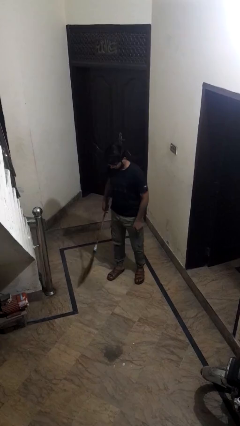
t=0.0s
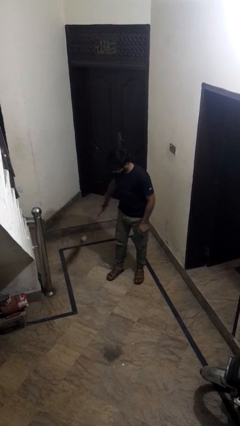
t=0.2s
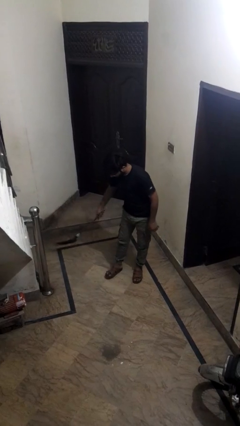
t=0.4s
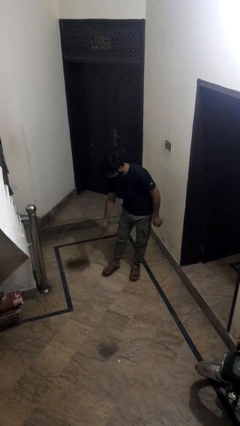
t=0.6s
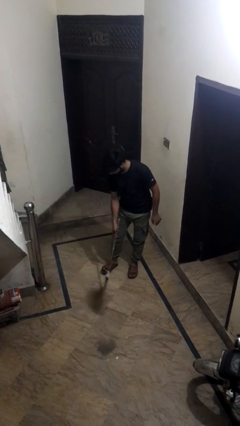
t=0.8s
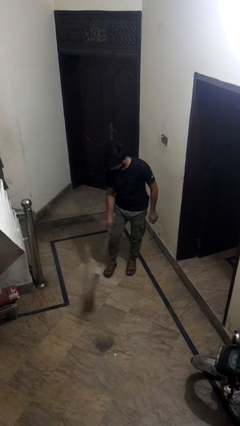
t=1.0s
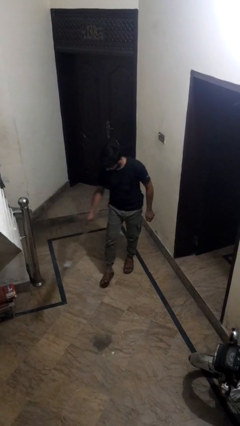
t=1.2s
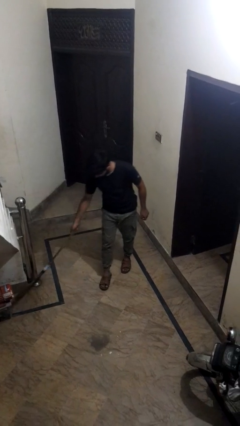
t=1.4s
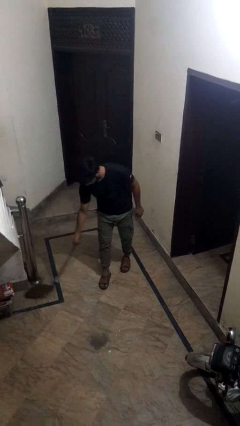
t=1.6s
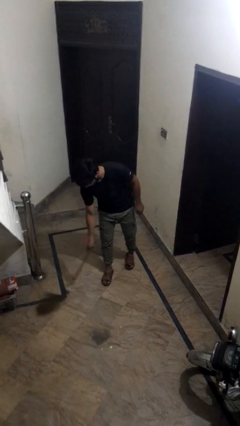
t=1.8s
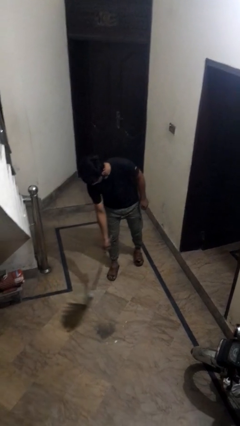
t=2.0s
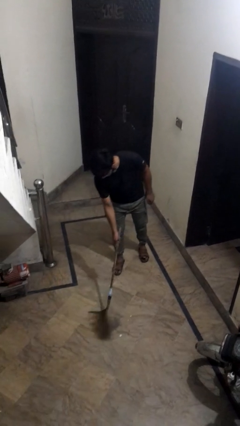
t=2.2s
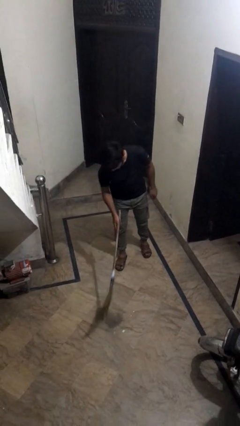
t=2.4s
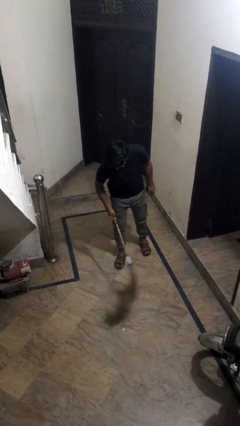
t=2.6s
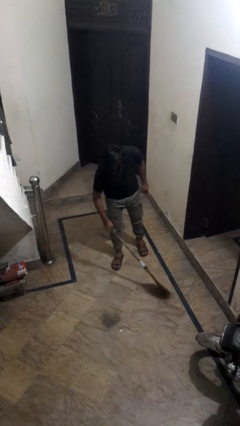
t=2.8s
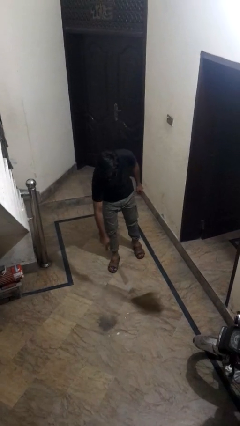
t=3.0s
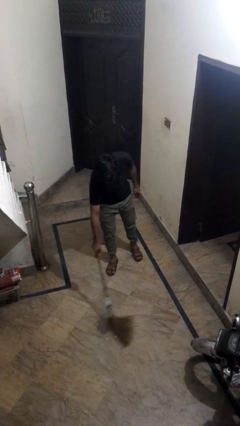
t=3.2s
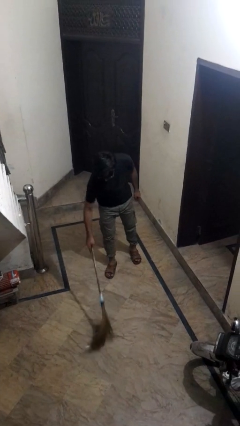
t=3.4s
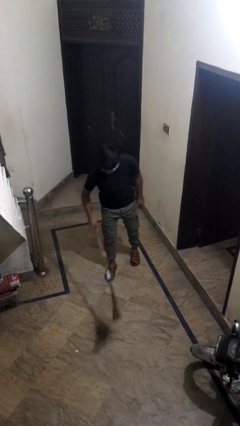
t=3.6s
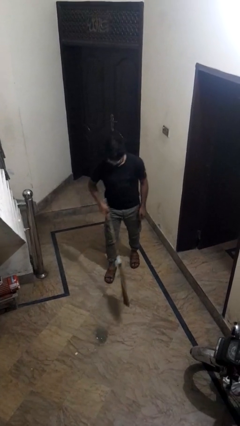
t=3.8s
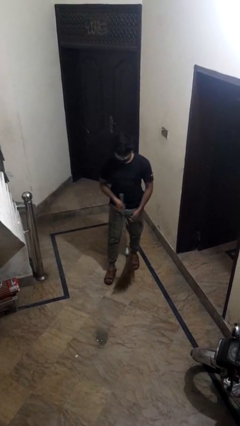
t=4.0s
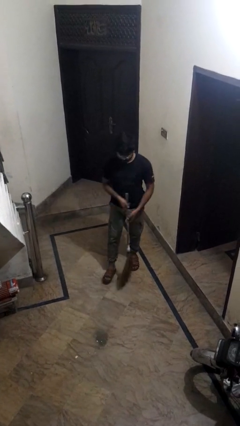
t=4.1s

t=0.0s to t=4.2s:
person sweeps floor

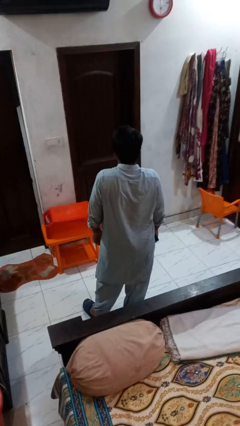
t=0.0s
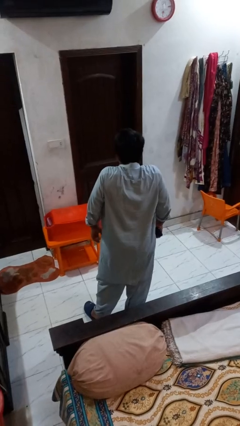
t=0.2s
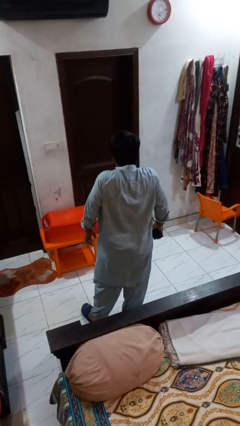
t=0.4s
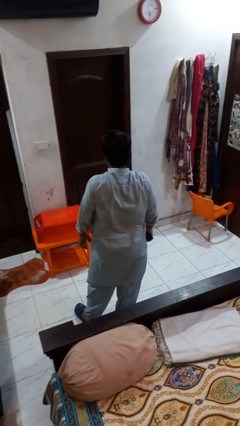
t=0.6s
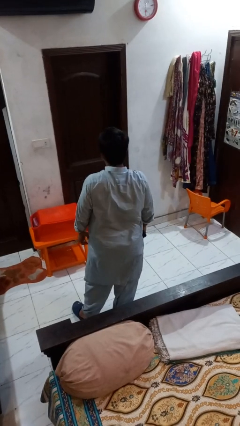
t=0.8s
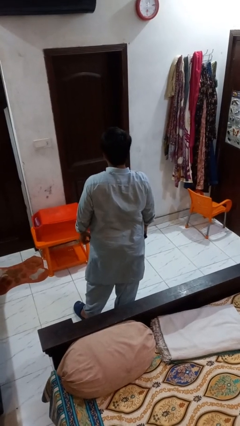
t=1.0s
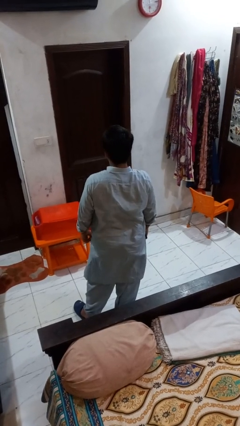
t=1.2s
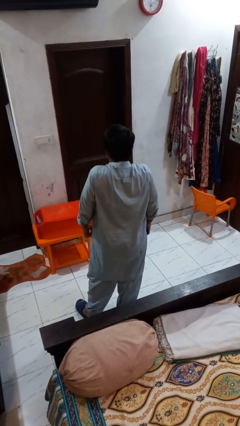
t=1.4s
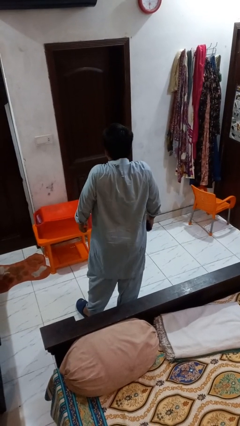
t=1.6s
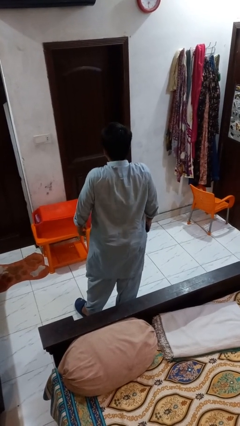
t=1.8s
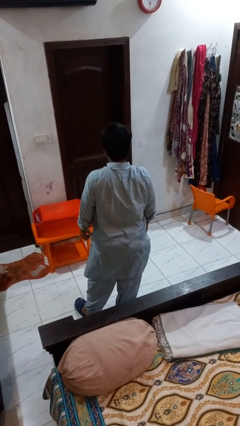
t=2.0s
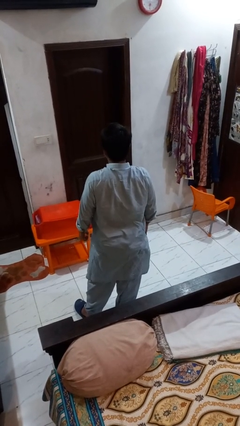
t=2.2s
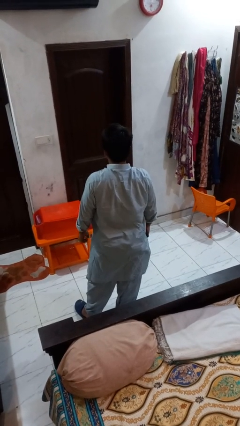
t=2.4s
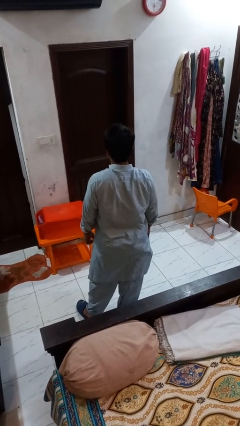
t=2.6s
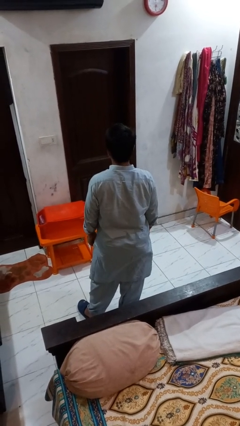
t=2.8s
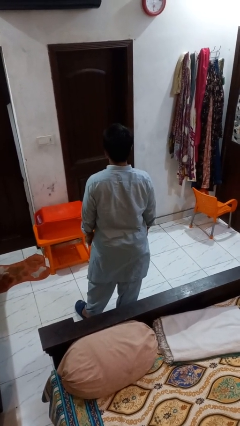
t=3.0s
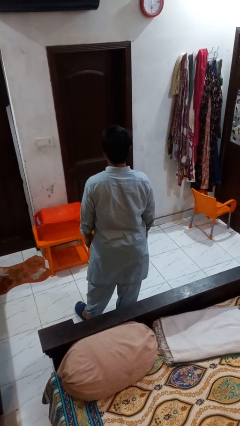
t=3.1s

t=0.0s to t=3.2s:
person shrugs

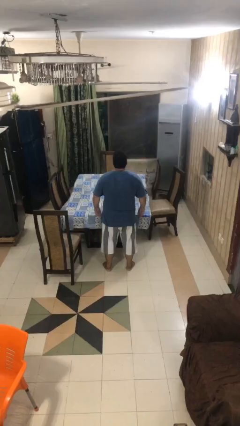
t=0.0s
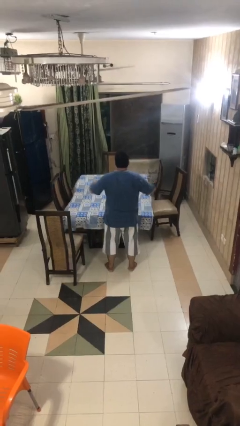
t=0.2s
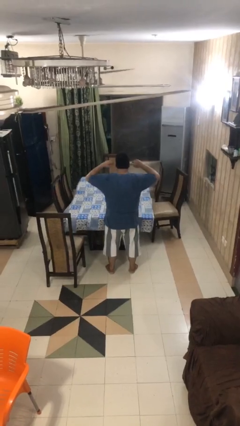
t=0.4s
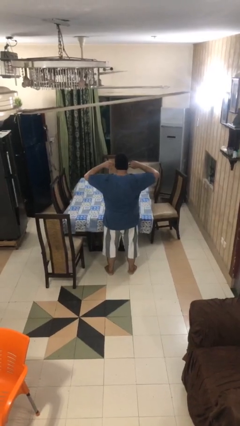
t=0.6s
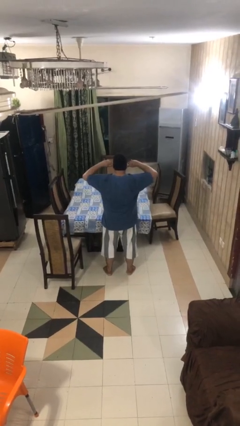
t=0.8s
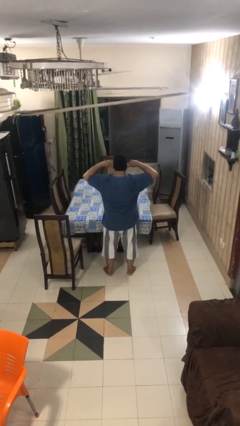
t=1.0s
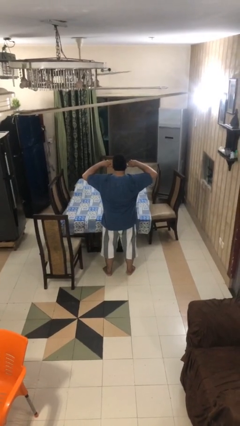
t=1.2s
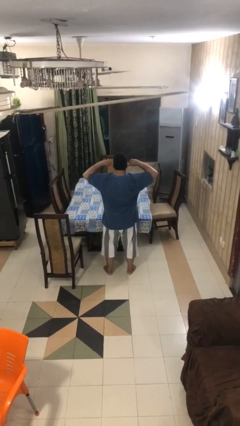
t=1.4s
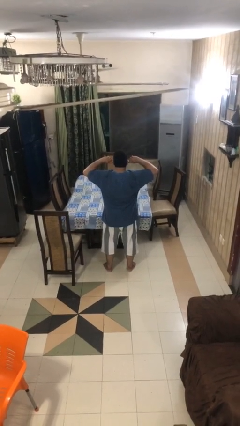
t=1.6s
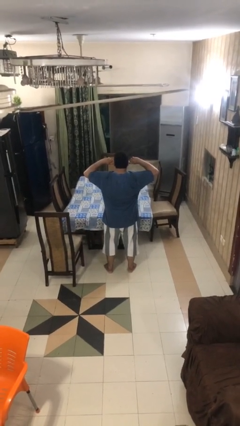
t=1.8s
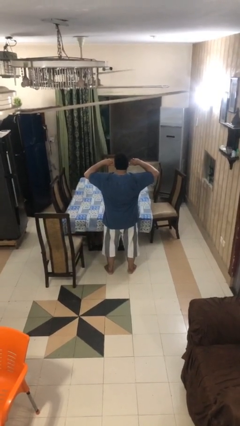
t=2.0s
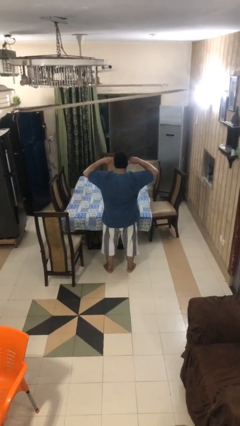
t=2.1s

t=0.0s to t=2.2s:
person puts fingers in ear

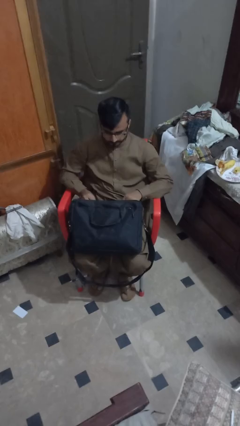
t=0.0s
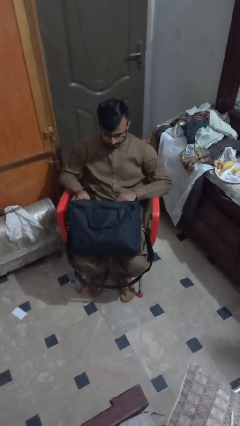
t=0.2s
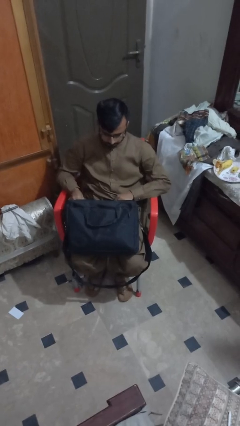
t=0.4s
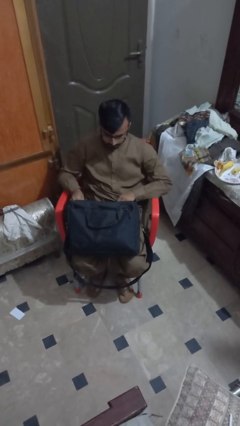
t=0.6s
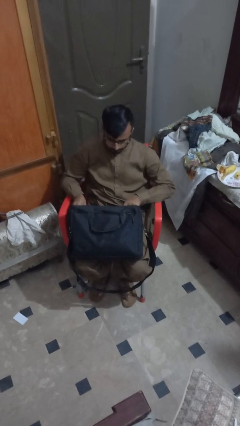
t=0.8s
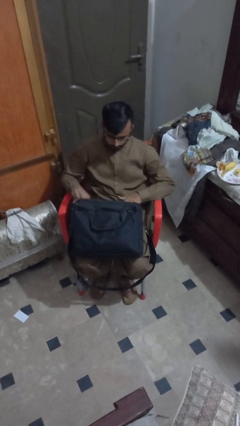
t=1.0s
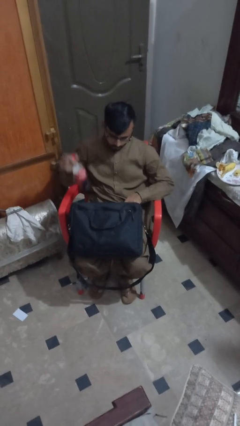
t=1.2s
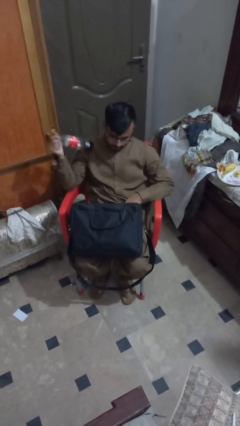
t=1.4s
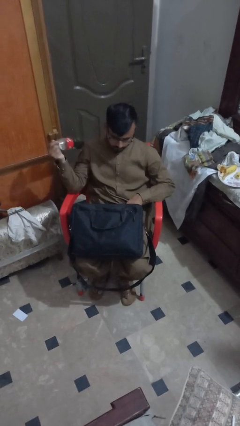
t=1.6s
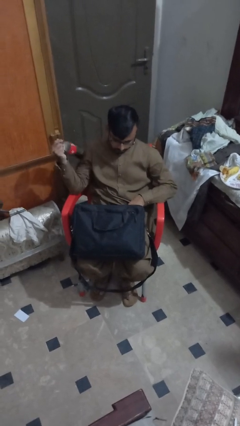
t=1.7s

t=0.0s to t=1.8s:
person takes object from bag

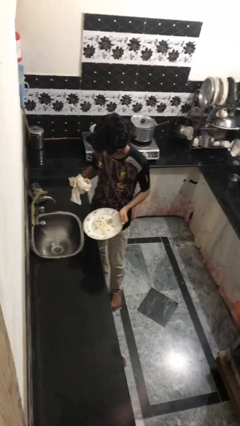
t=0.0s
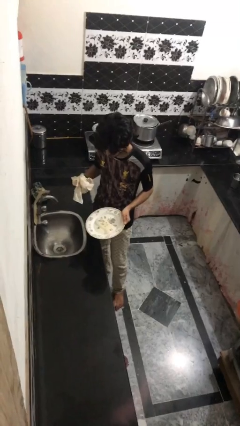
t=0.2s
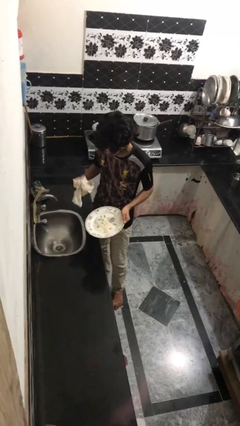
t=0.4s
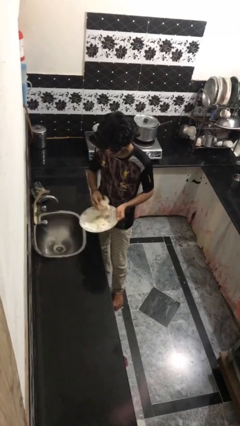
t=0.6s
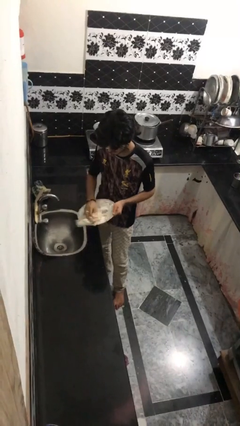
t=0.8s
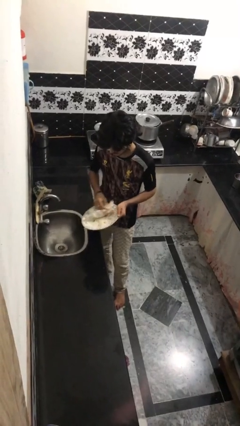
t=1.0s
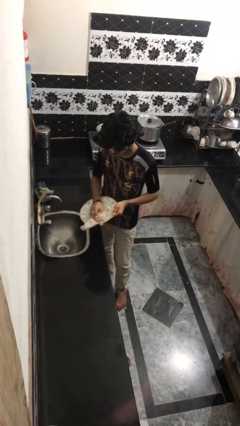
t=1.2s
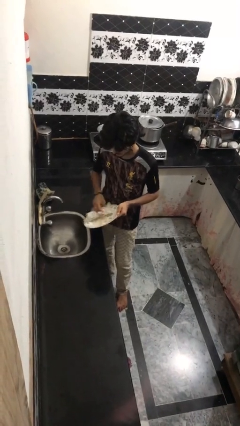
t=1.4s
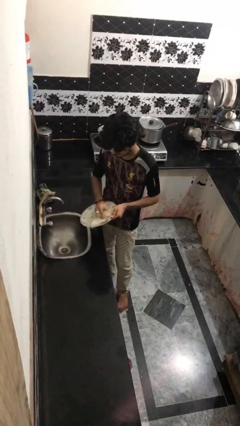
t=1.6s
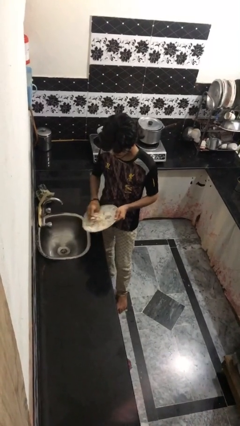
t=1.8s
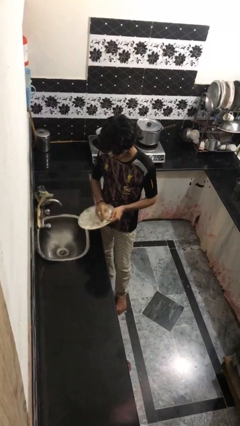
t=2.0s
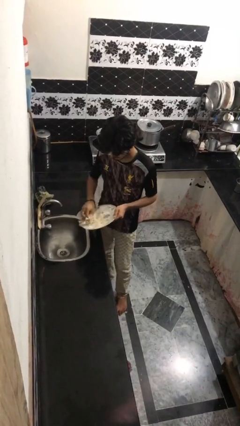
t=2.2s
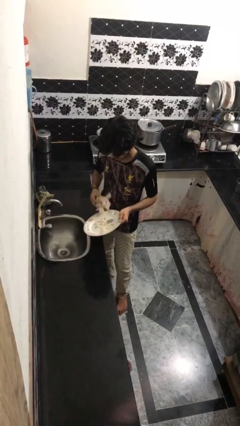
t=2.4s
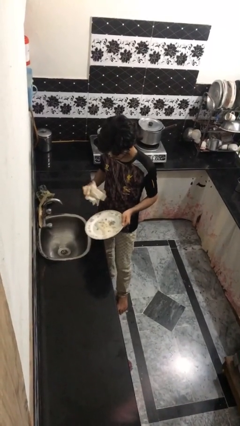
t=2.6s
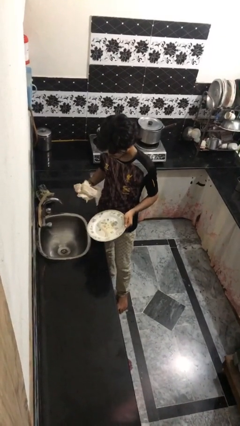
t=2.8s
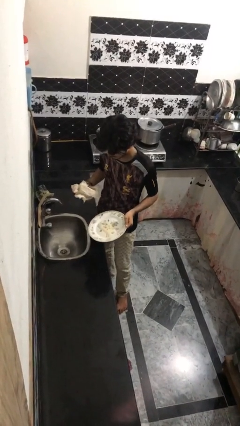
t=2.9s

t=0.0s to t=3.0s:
person dries dish

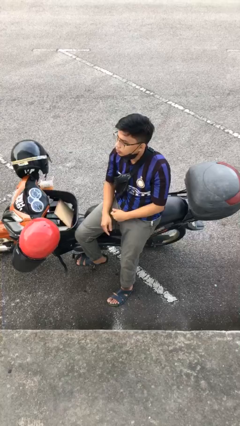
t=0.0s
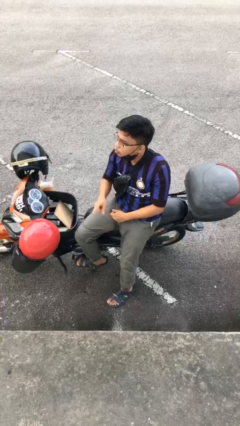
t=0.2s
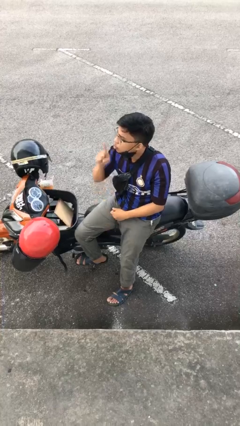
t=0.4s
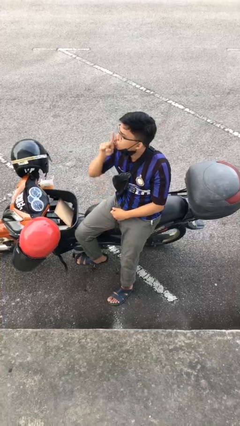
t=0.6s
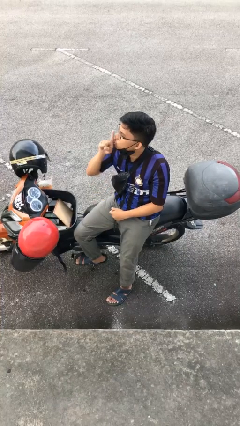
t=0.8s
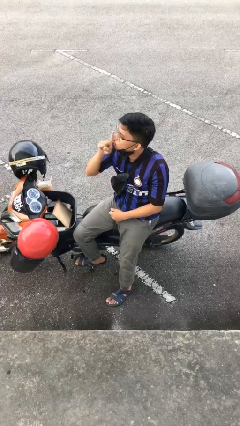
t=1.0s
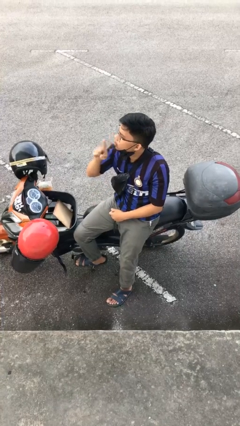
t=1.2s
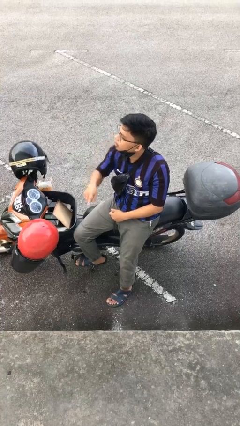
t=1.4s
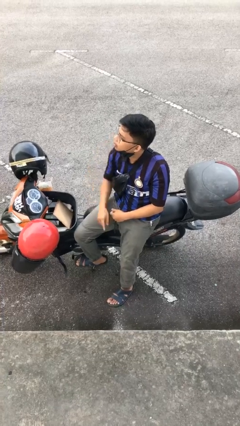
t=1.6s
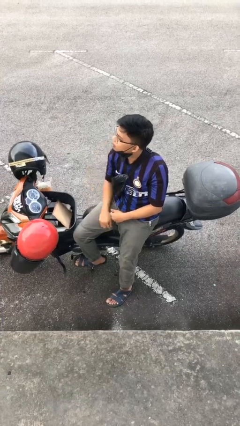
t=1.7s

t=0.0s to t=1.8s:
person gestures be quiet

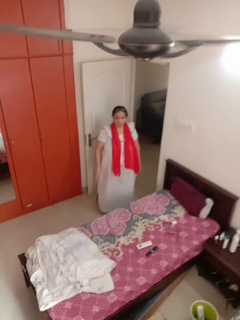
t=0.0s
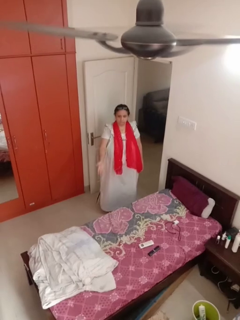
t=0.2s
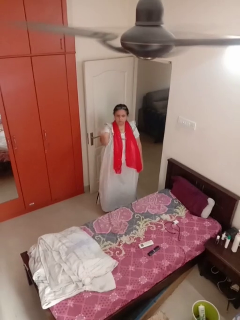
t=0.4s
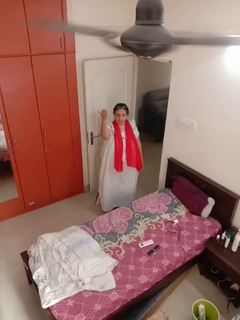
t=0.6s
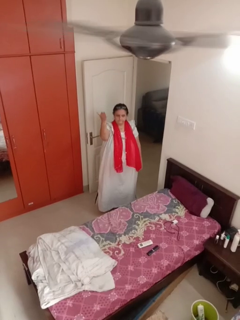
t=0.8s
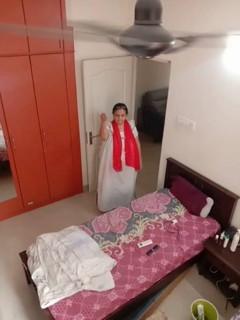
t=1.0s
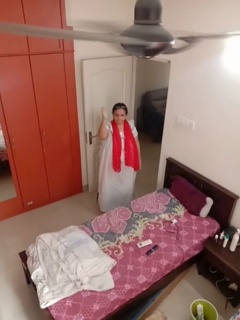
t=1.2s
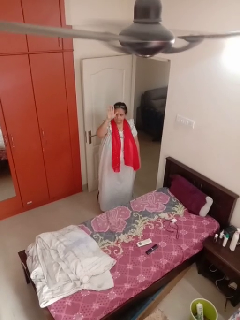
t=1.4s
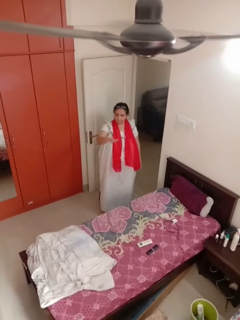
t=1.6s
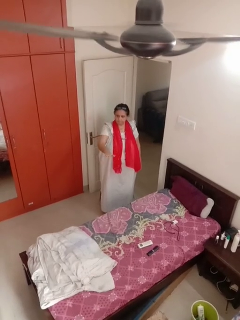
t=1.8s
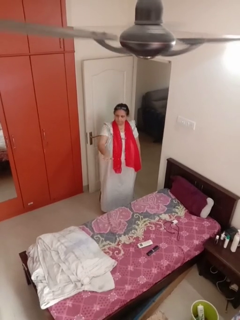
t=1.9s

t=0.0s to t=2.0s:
person gestures swipe up
